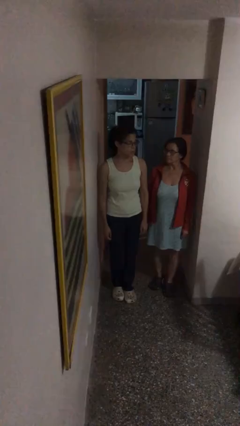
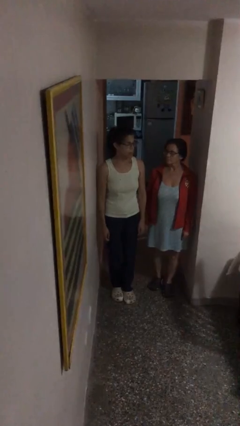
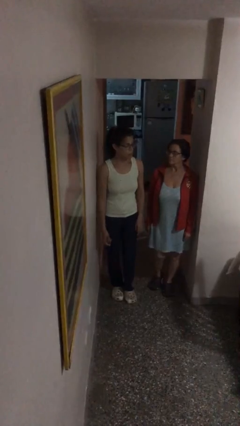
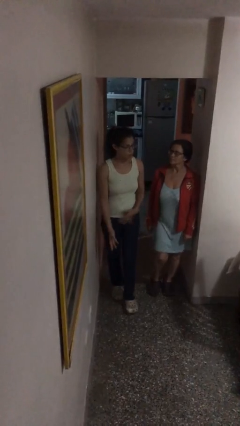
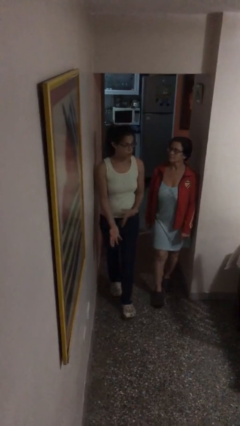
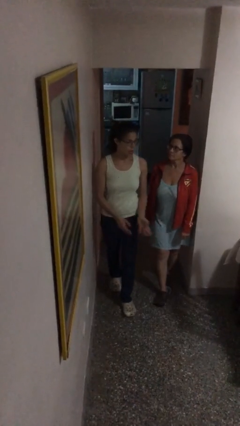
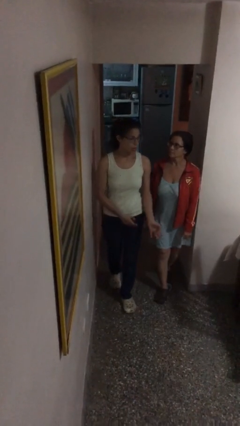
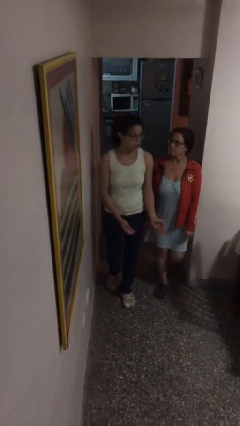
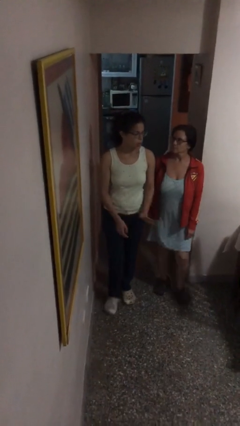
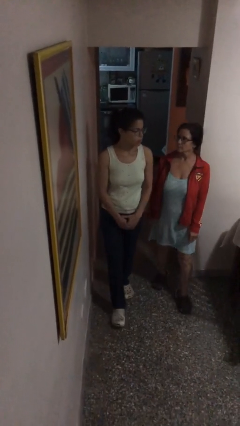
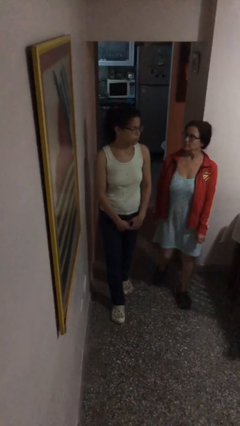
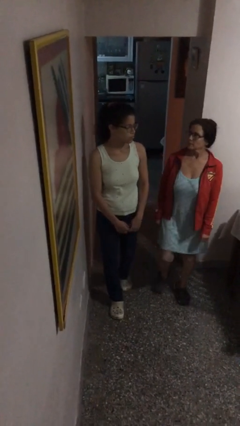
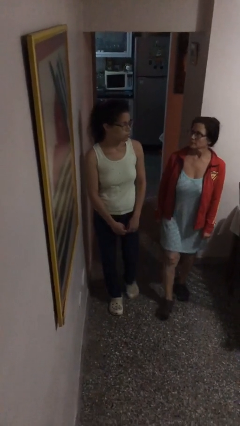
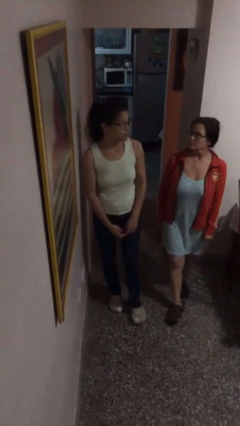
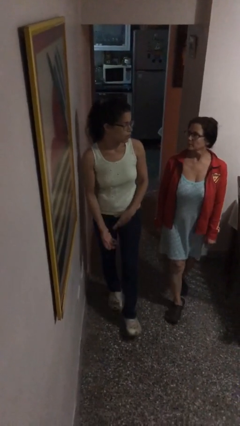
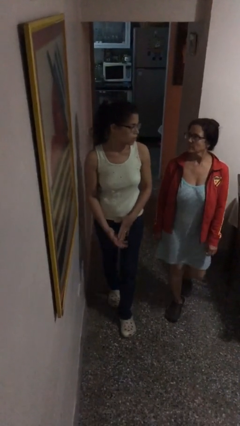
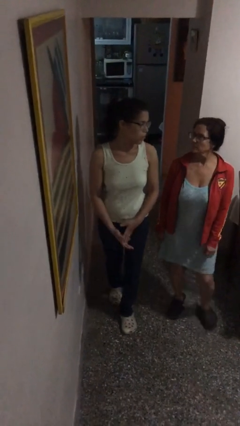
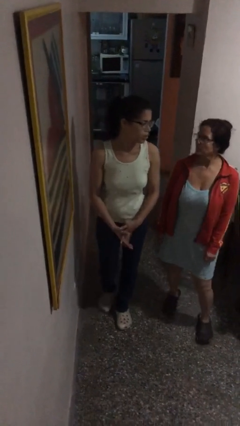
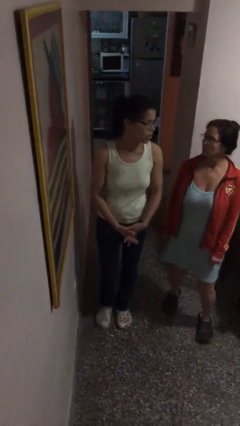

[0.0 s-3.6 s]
person talks to person

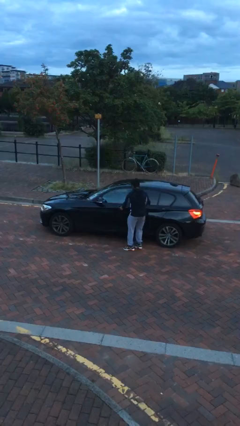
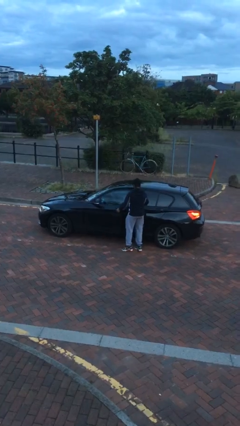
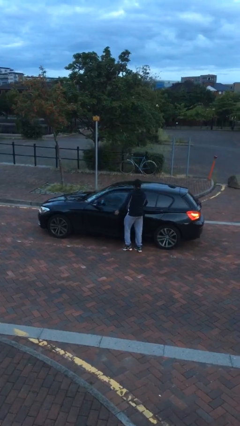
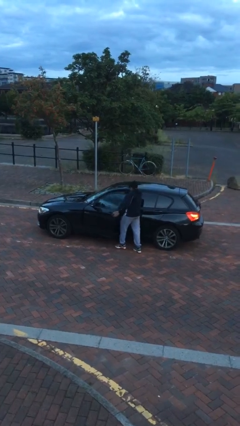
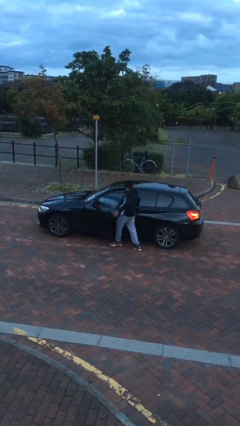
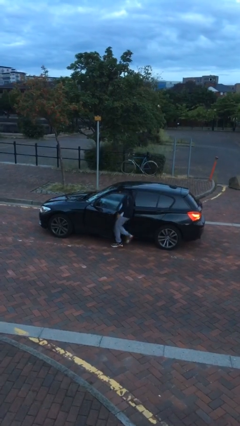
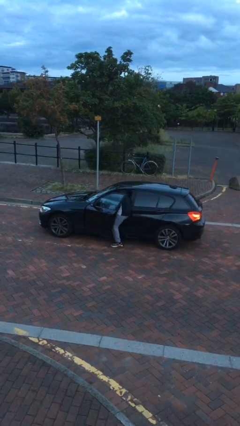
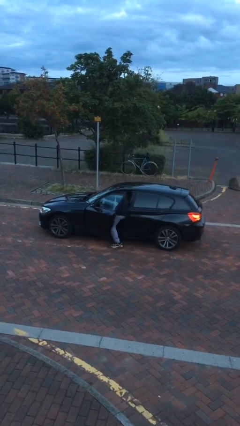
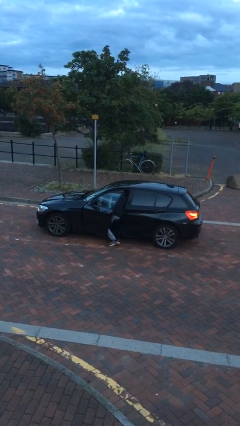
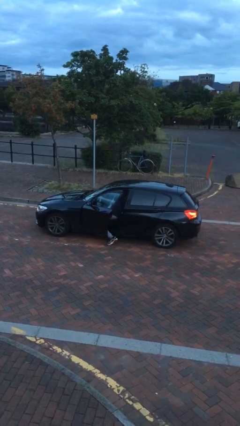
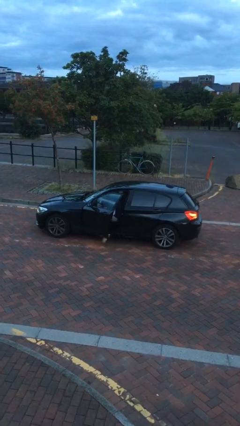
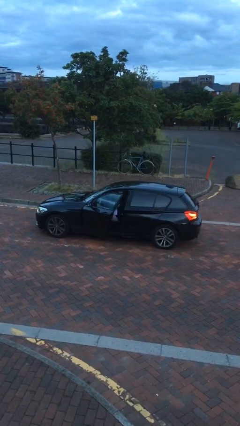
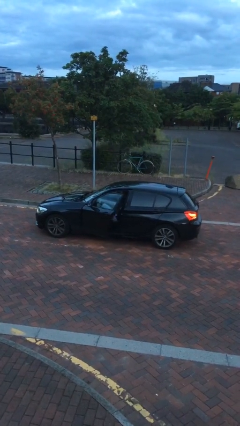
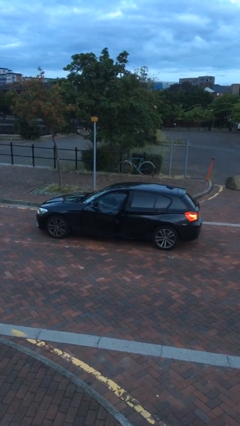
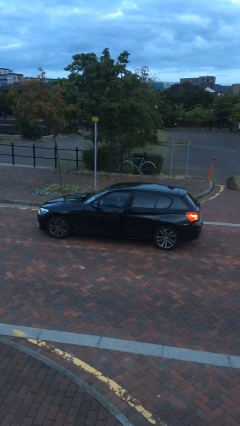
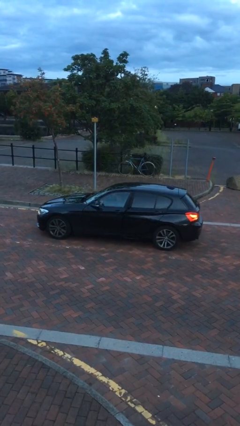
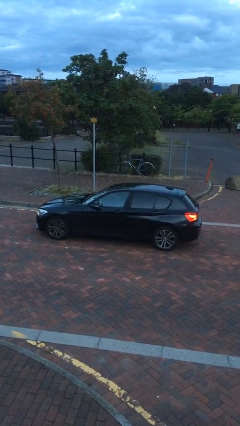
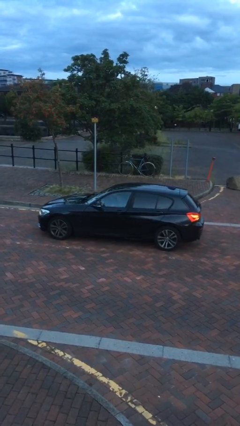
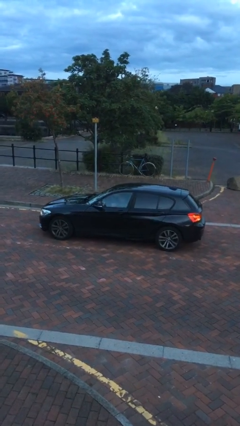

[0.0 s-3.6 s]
car picks up person

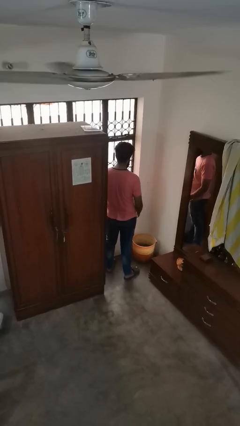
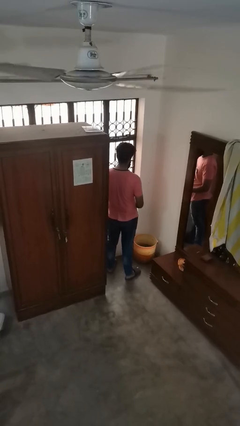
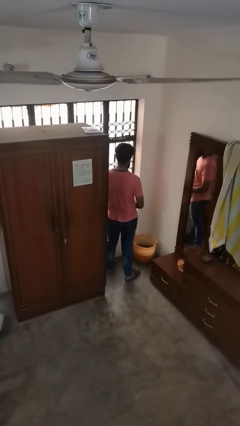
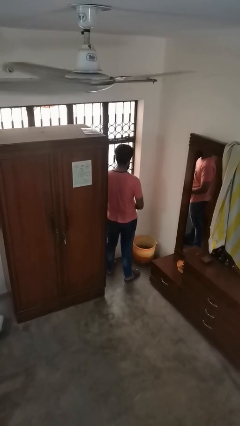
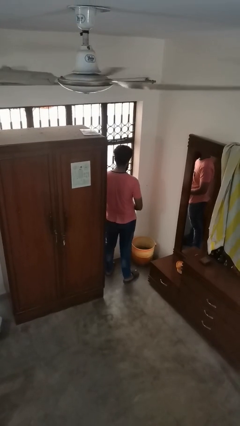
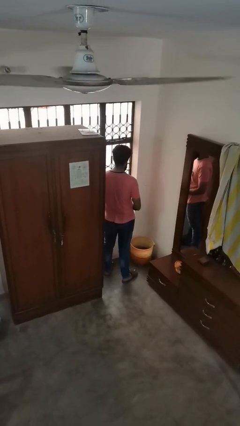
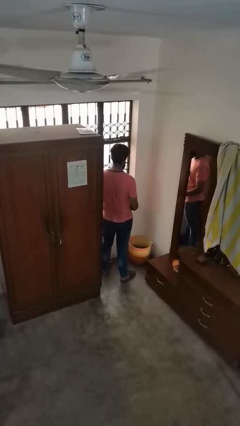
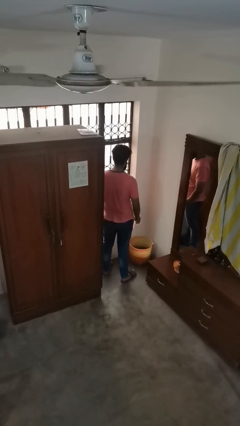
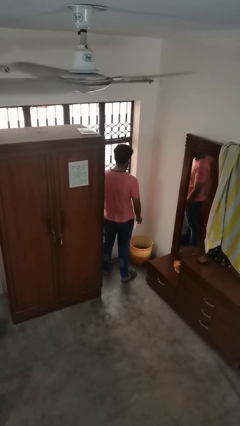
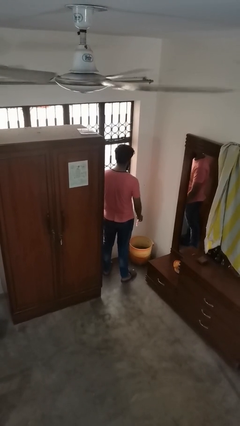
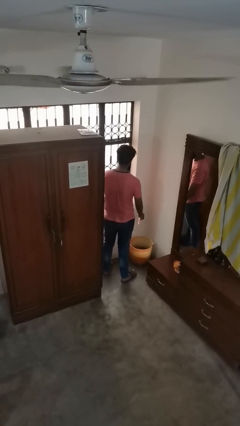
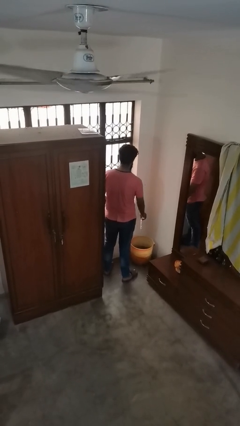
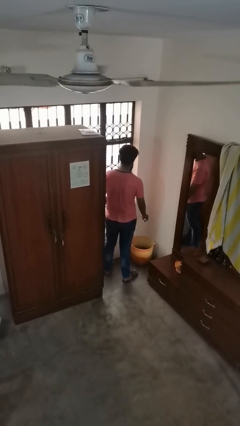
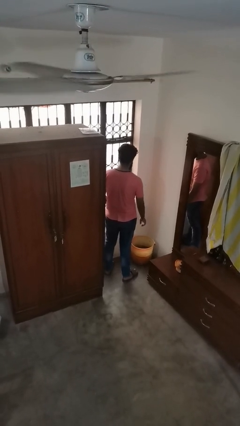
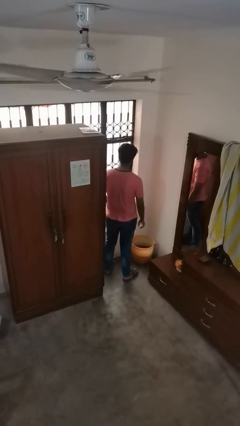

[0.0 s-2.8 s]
person discards trash

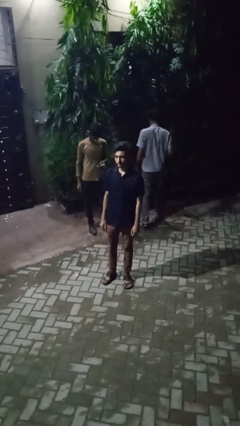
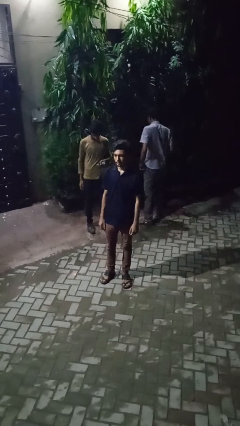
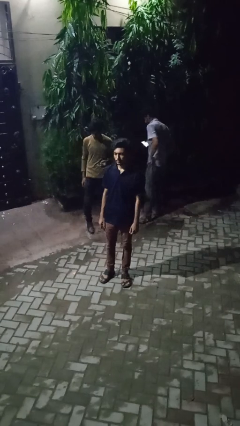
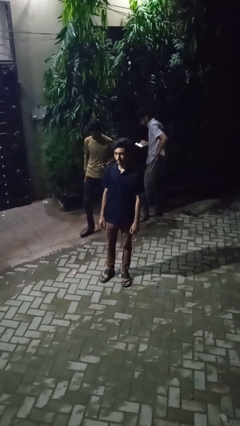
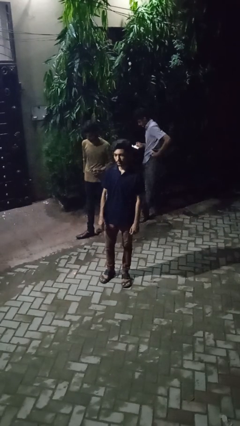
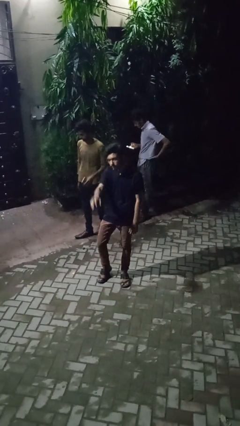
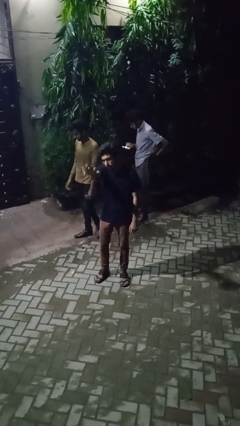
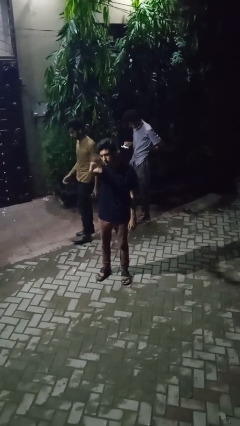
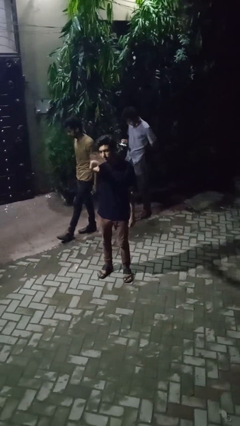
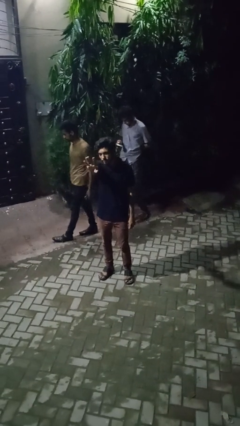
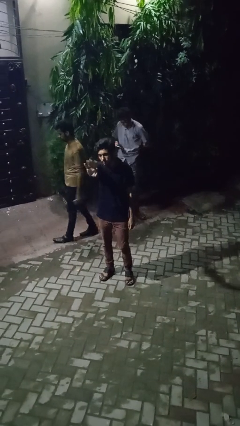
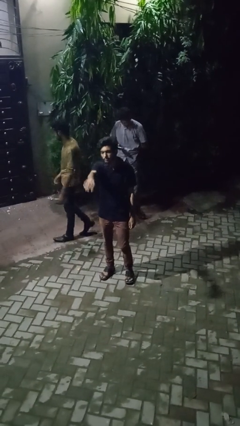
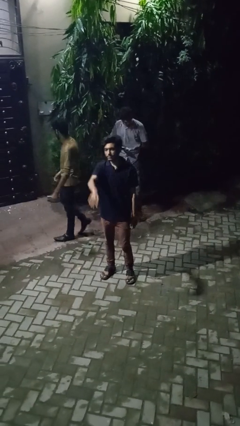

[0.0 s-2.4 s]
person waves at person

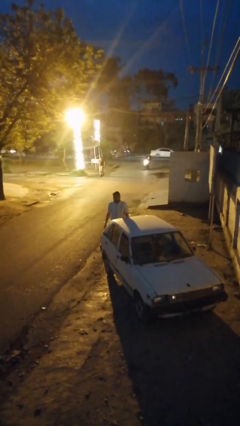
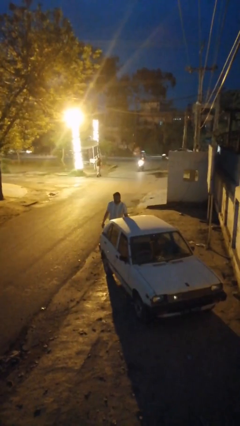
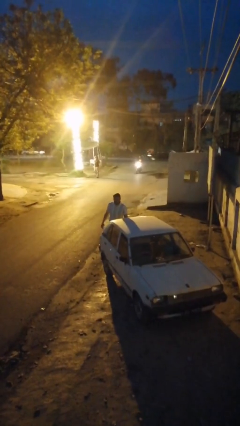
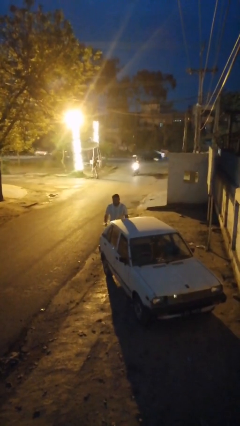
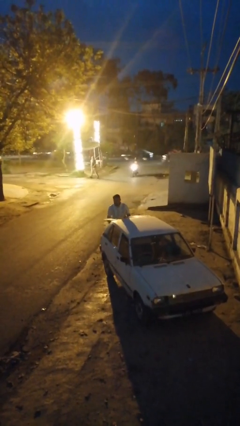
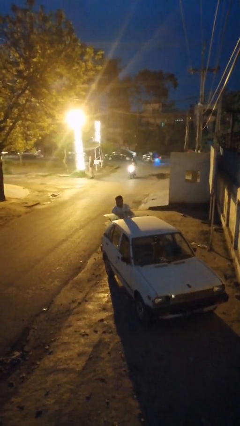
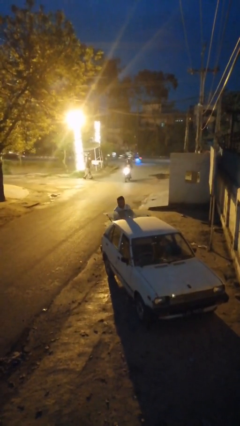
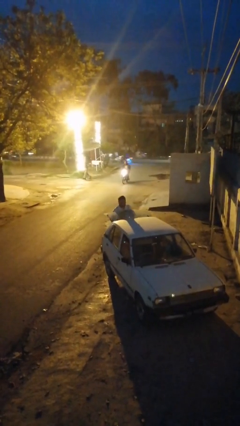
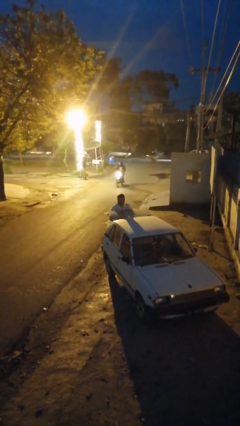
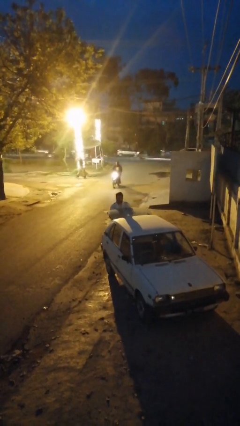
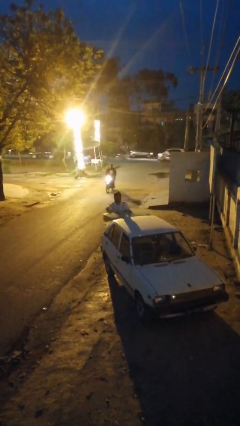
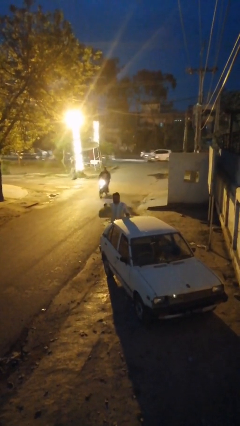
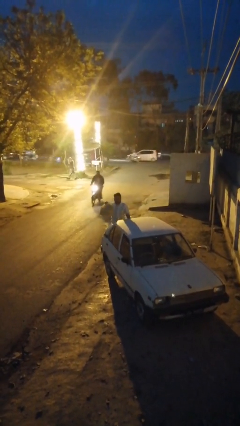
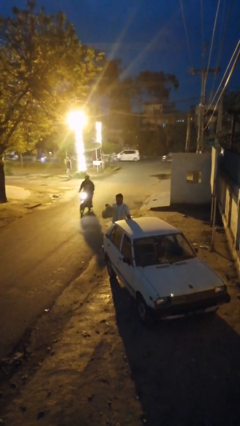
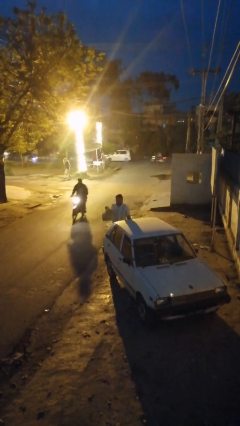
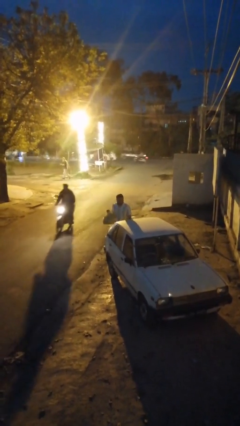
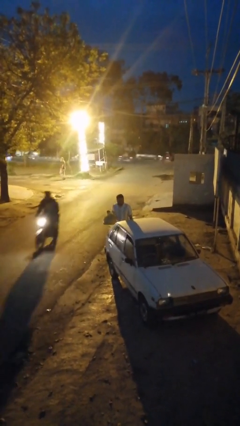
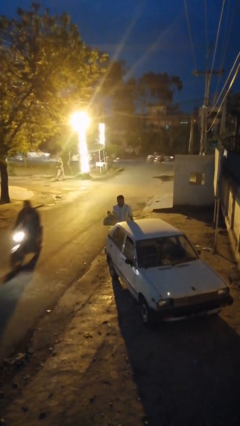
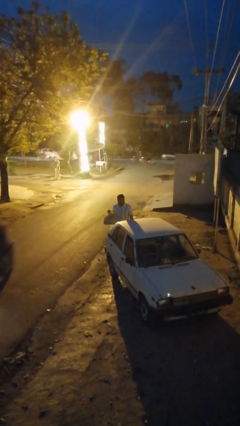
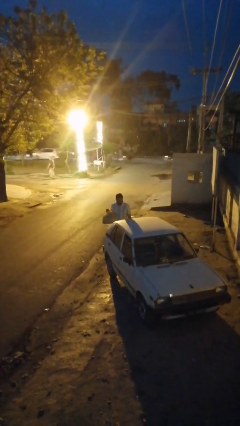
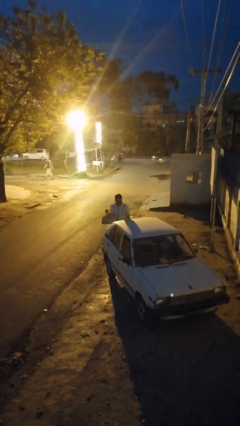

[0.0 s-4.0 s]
person unloads car

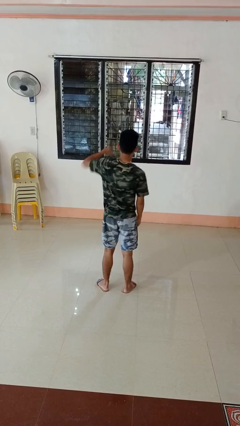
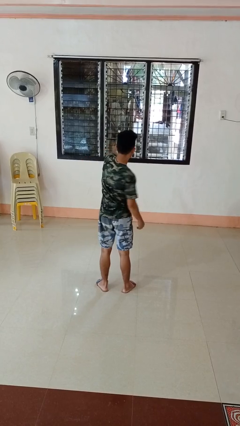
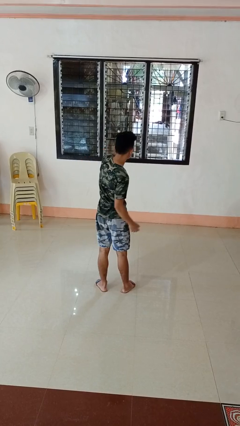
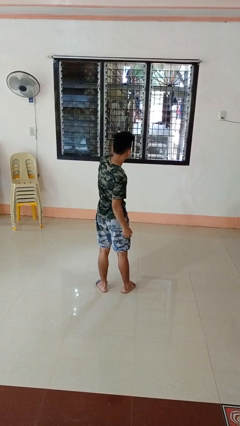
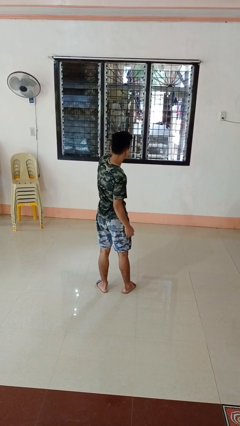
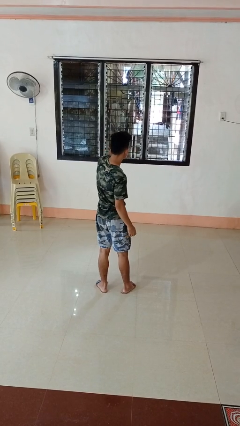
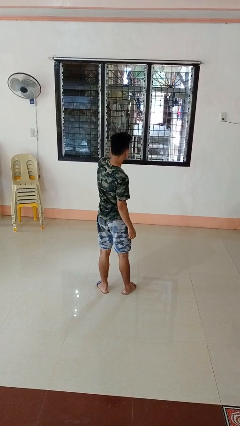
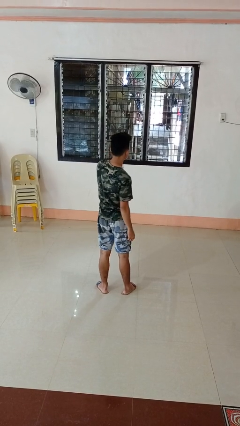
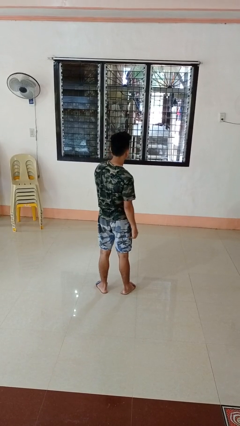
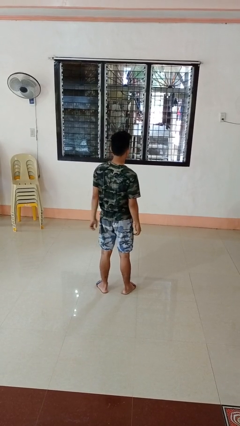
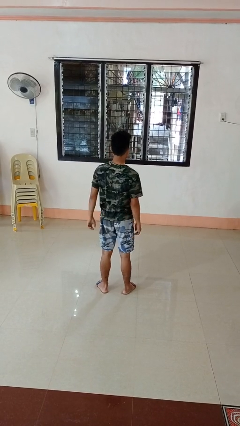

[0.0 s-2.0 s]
person punches
